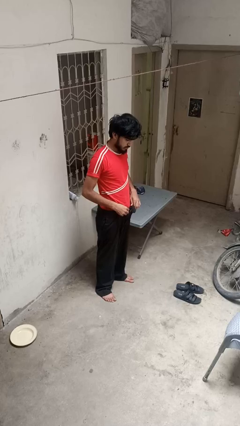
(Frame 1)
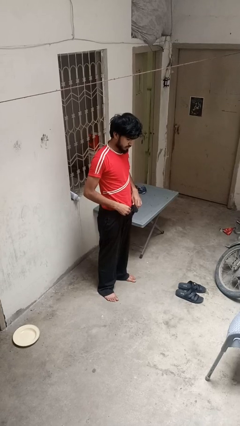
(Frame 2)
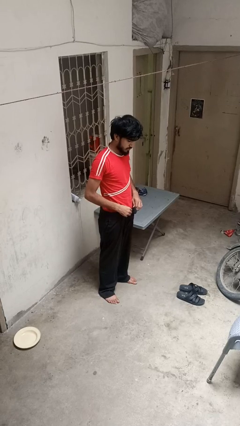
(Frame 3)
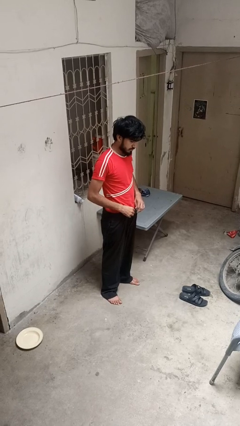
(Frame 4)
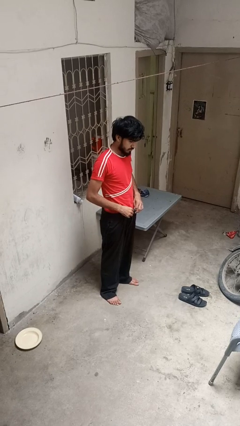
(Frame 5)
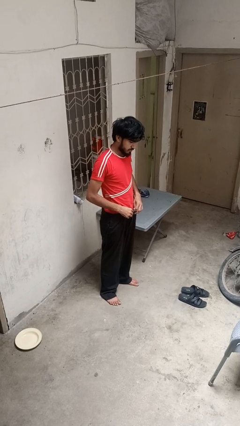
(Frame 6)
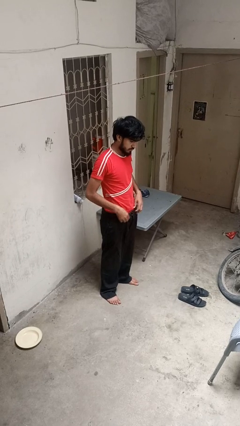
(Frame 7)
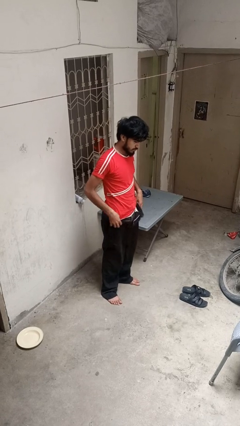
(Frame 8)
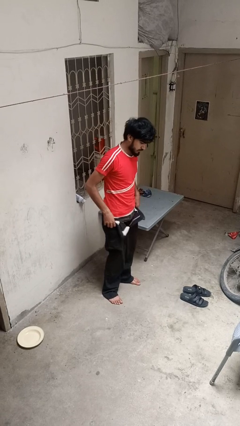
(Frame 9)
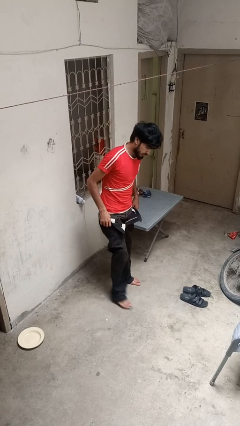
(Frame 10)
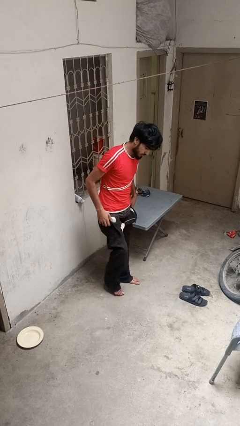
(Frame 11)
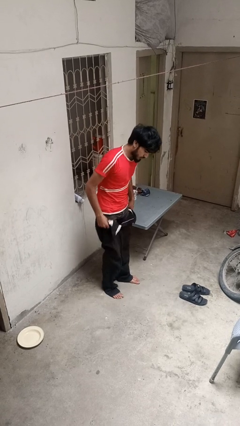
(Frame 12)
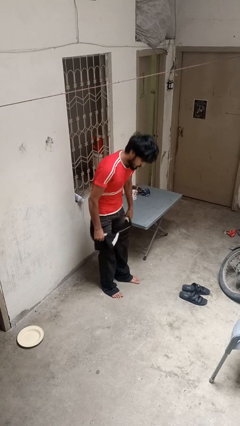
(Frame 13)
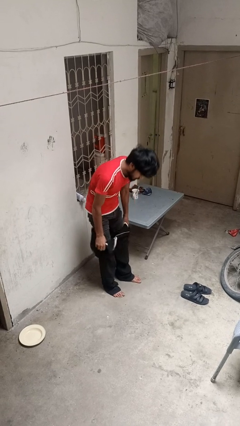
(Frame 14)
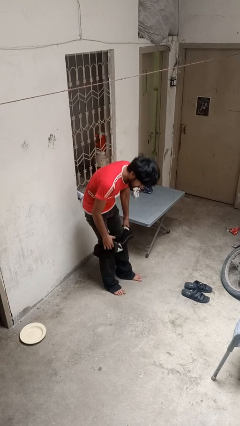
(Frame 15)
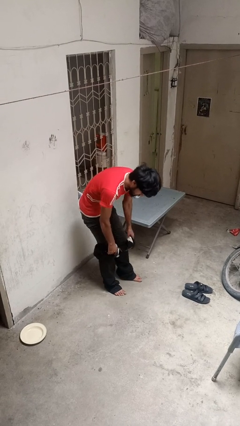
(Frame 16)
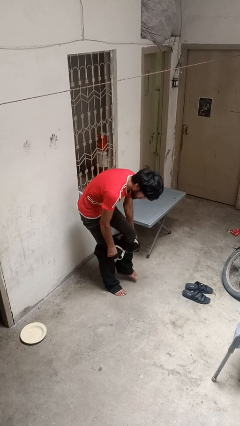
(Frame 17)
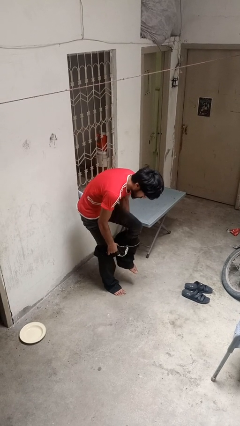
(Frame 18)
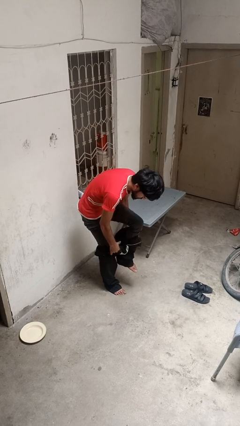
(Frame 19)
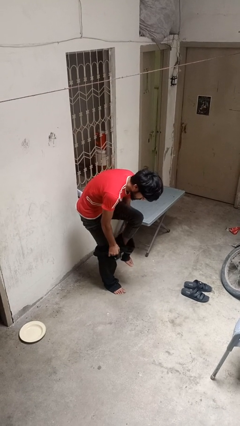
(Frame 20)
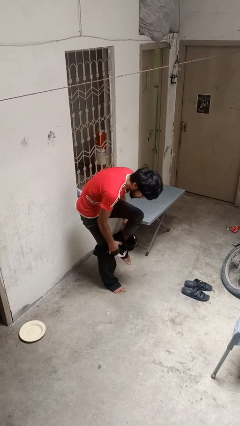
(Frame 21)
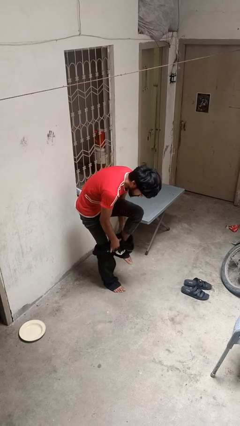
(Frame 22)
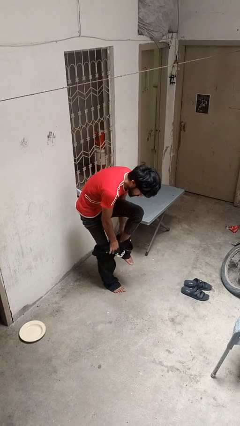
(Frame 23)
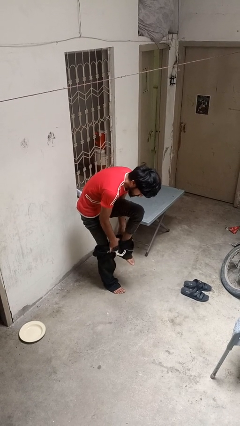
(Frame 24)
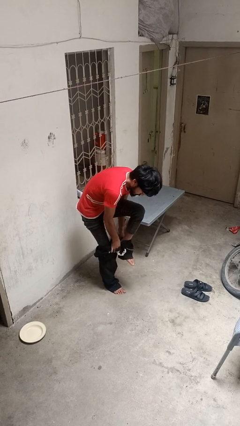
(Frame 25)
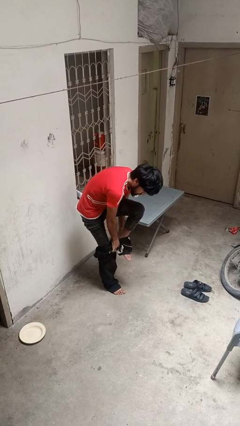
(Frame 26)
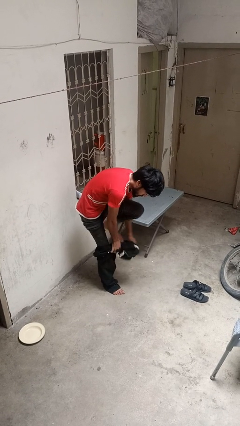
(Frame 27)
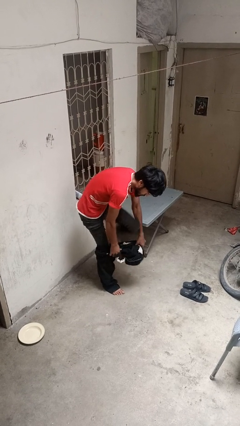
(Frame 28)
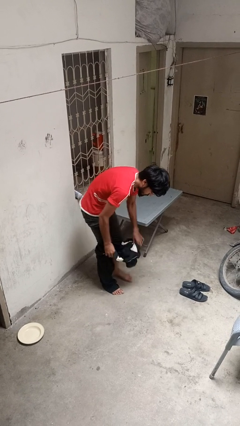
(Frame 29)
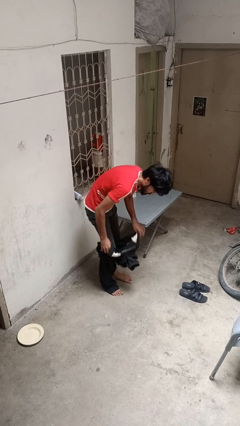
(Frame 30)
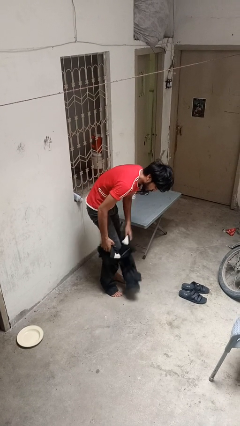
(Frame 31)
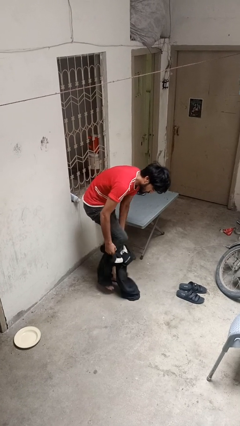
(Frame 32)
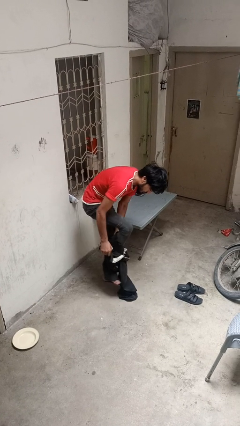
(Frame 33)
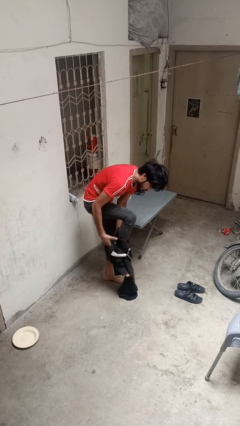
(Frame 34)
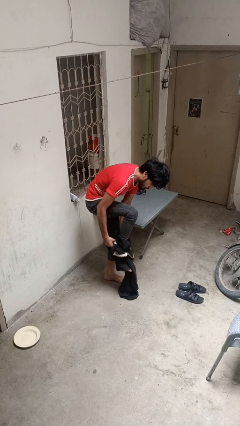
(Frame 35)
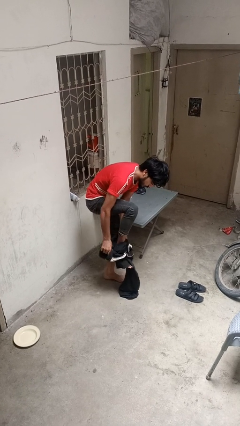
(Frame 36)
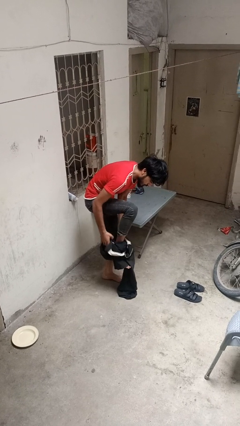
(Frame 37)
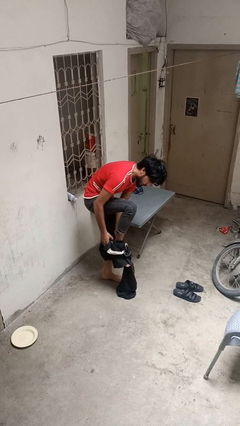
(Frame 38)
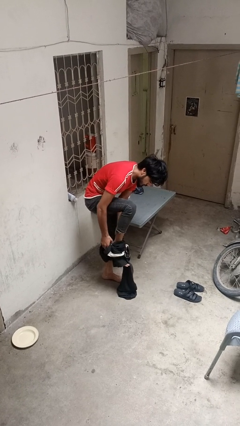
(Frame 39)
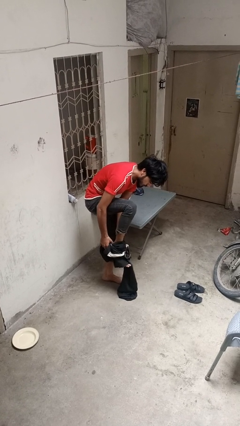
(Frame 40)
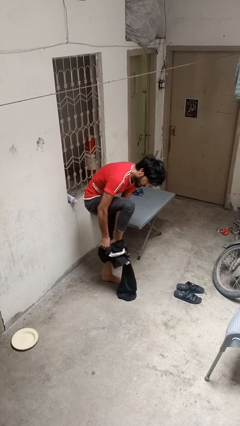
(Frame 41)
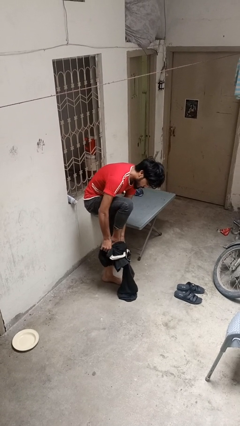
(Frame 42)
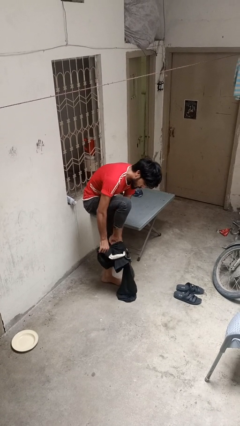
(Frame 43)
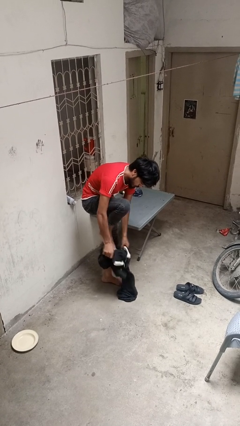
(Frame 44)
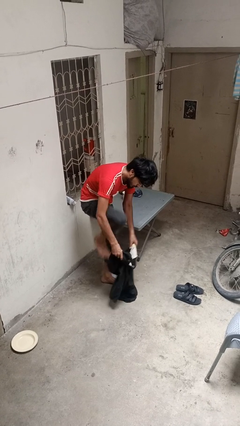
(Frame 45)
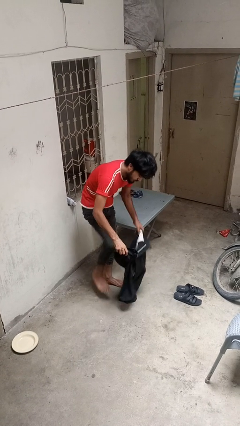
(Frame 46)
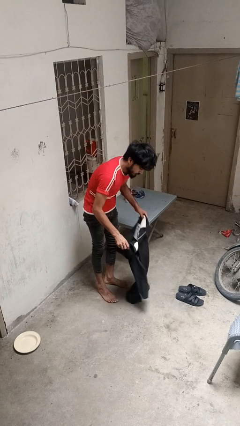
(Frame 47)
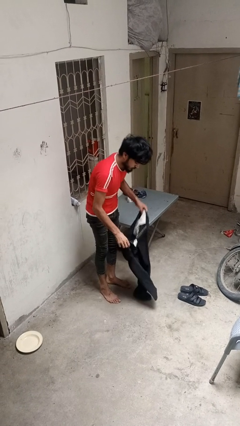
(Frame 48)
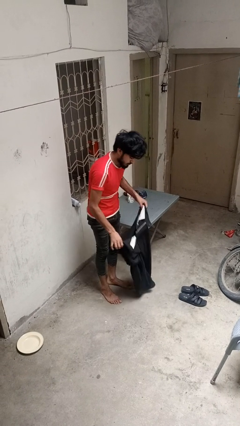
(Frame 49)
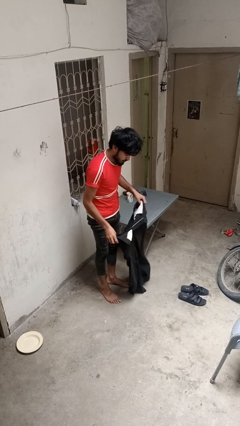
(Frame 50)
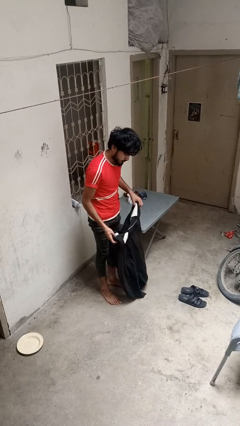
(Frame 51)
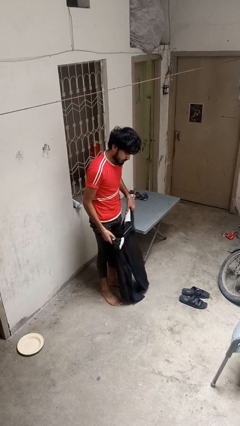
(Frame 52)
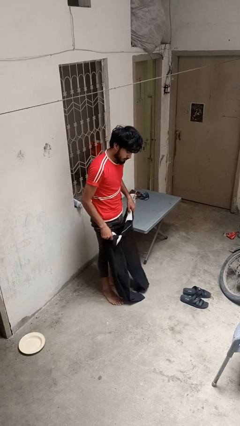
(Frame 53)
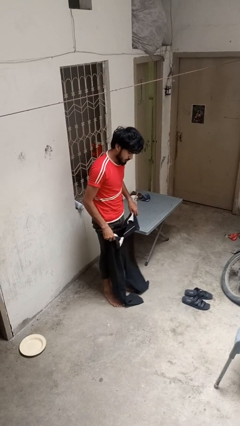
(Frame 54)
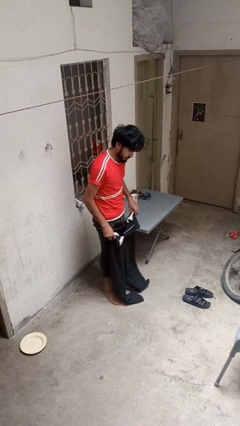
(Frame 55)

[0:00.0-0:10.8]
person takes off pants

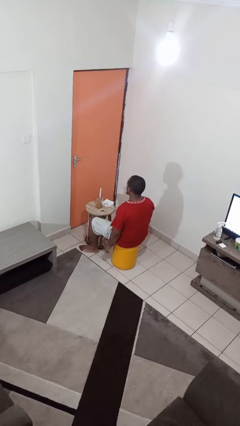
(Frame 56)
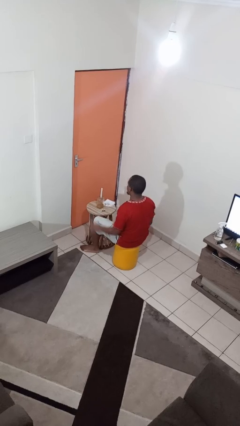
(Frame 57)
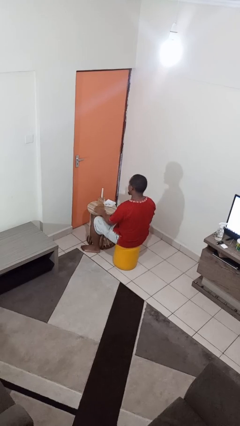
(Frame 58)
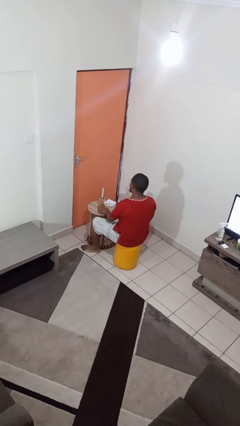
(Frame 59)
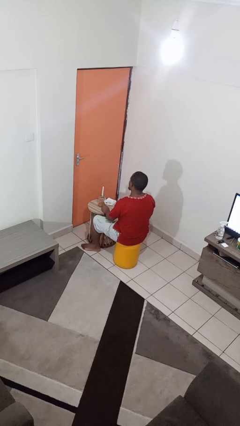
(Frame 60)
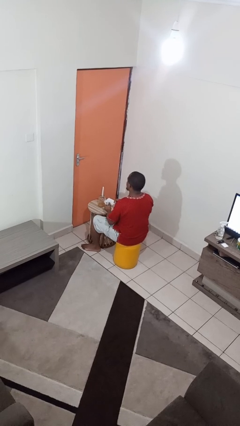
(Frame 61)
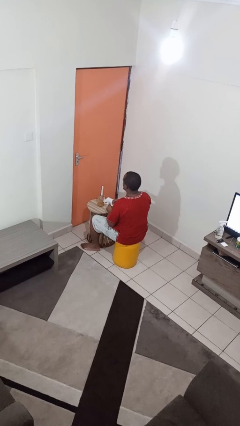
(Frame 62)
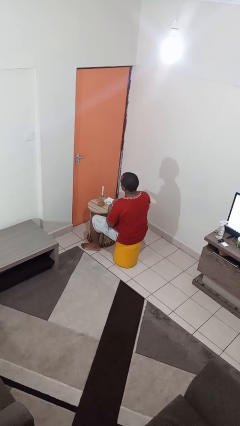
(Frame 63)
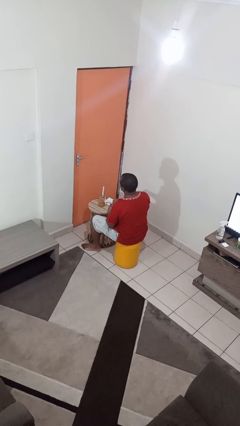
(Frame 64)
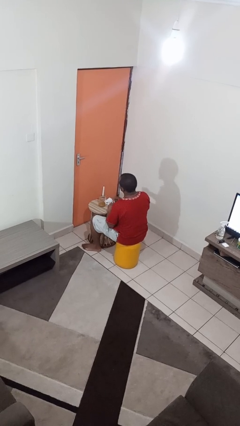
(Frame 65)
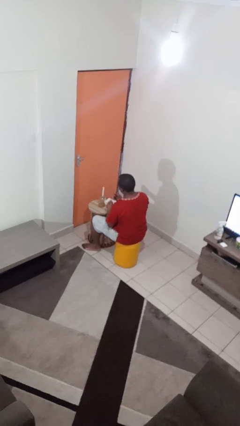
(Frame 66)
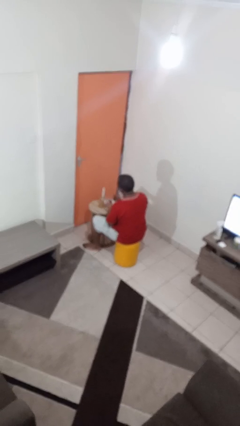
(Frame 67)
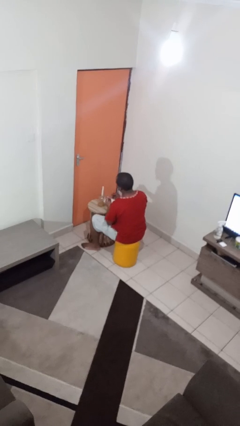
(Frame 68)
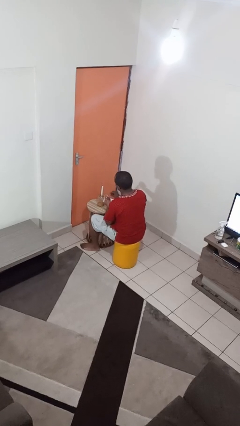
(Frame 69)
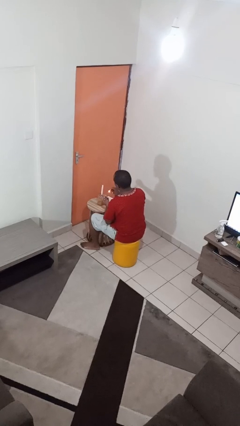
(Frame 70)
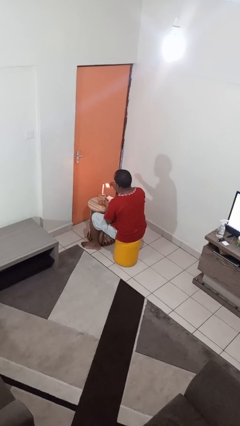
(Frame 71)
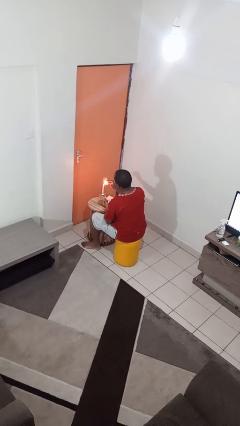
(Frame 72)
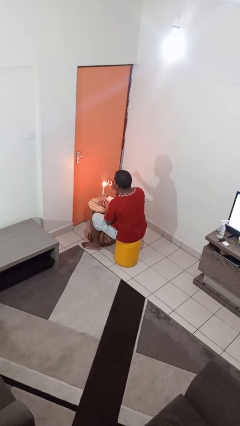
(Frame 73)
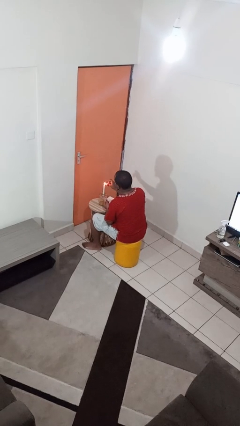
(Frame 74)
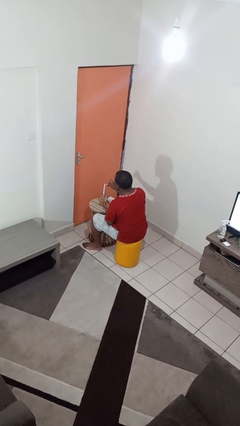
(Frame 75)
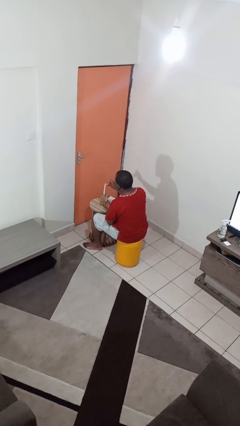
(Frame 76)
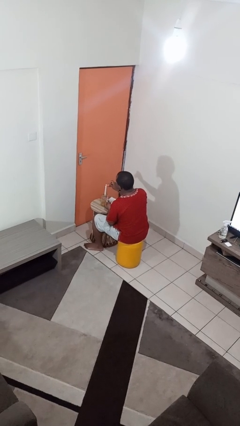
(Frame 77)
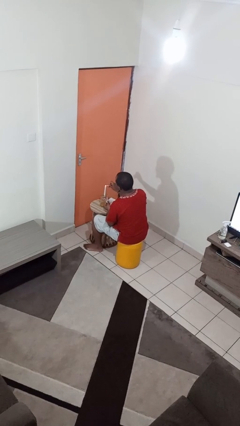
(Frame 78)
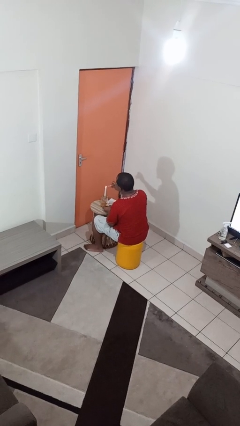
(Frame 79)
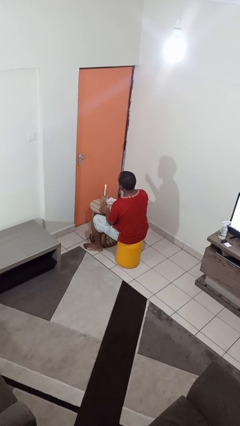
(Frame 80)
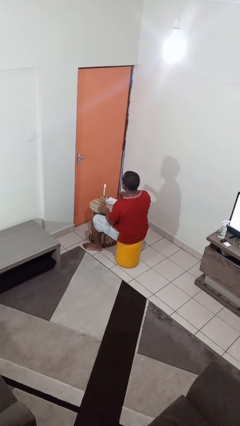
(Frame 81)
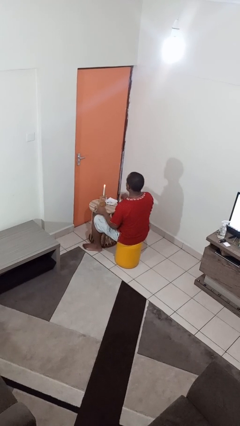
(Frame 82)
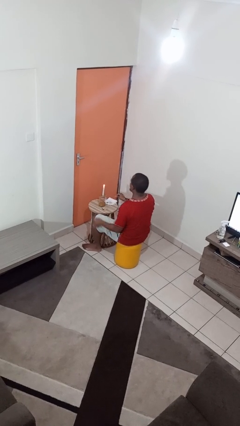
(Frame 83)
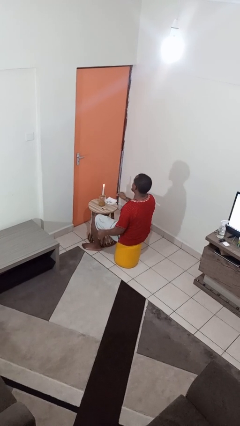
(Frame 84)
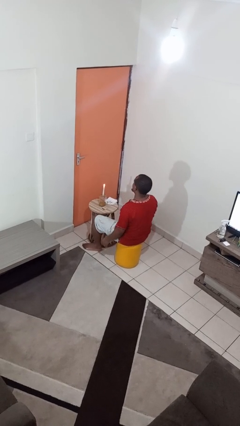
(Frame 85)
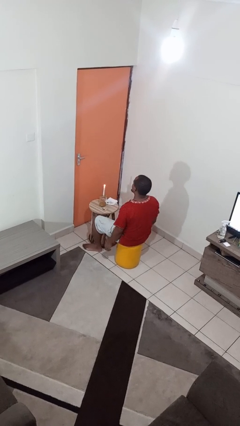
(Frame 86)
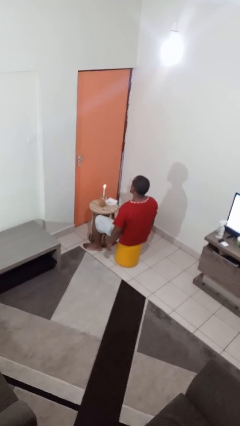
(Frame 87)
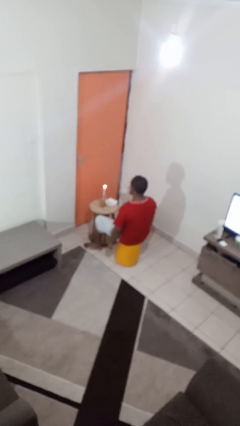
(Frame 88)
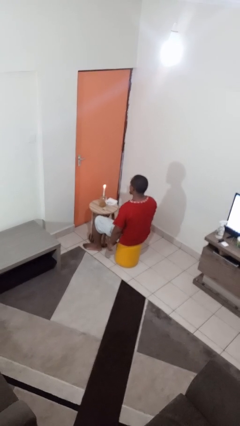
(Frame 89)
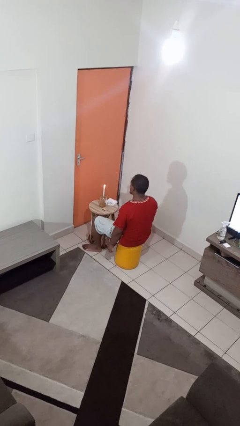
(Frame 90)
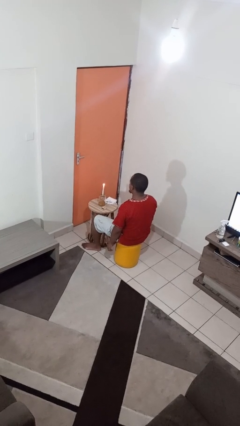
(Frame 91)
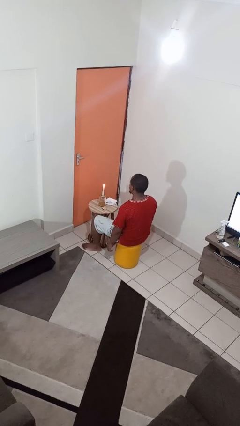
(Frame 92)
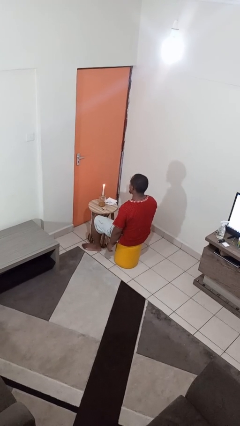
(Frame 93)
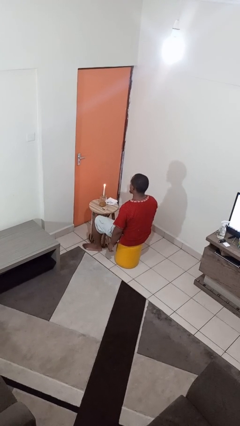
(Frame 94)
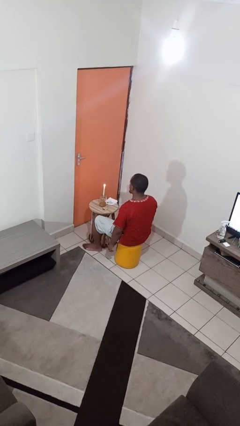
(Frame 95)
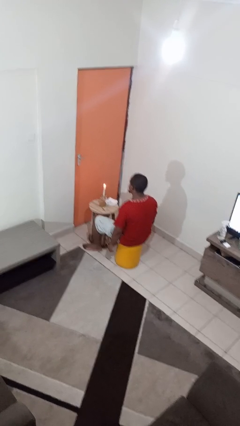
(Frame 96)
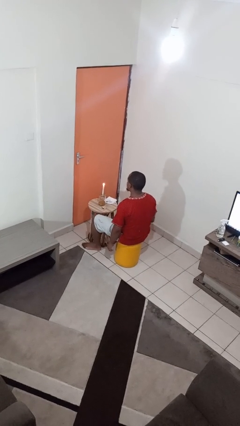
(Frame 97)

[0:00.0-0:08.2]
person lights candle
